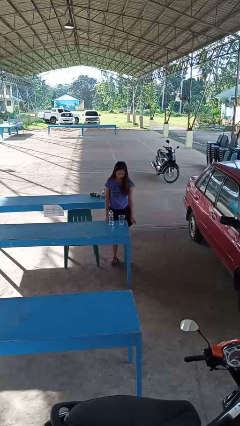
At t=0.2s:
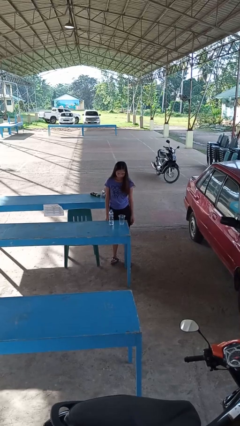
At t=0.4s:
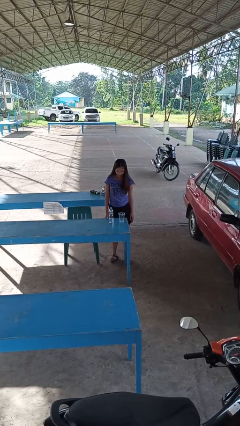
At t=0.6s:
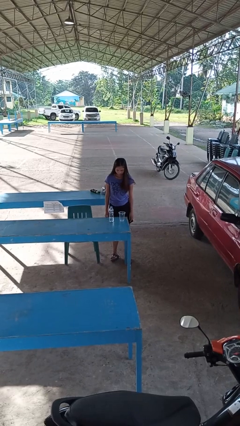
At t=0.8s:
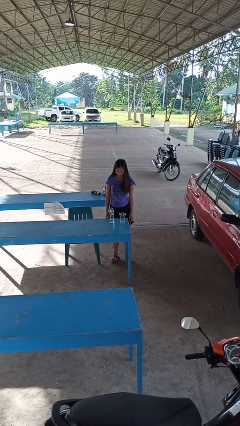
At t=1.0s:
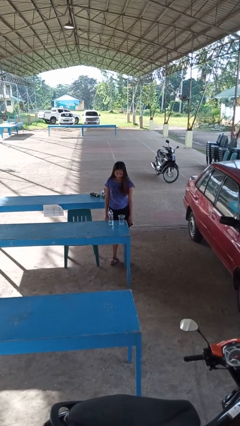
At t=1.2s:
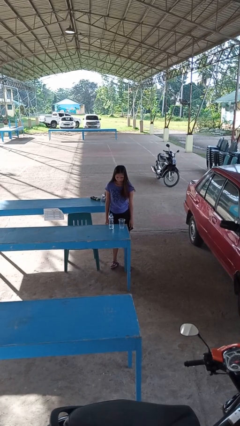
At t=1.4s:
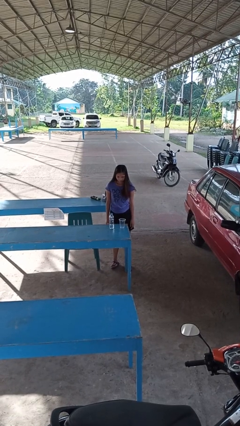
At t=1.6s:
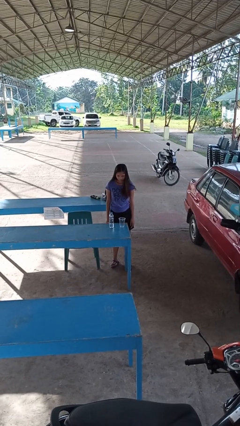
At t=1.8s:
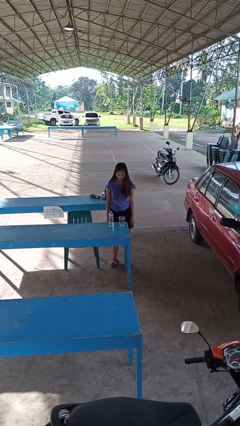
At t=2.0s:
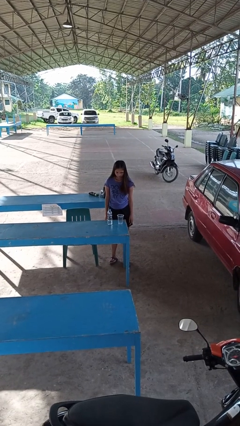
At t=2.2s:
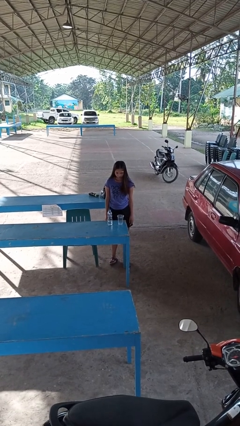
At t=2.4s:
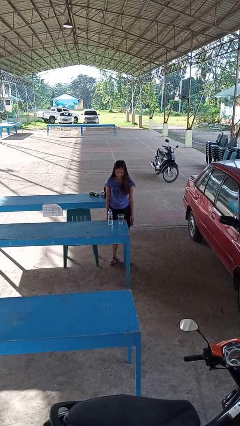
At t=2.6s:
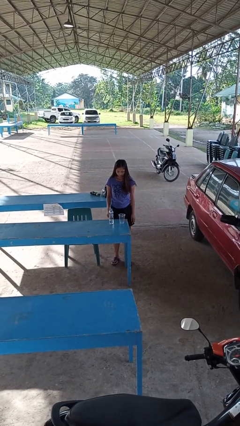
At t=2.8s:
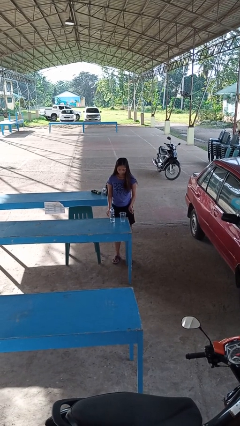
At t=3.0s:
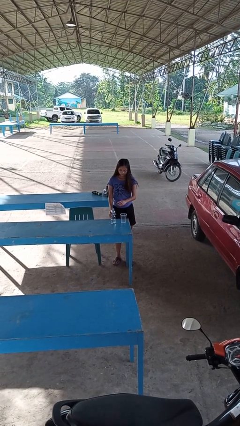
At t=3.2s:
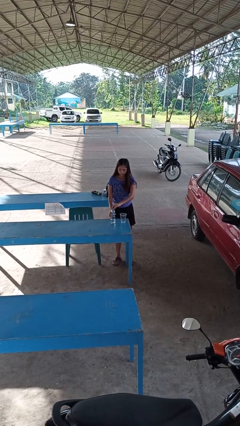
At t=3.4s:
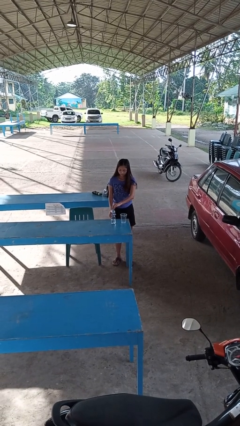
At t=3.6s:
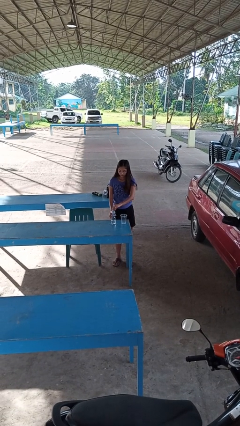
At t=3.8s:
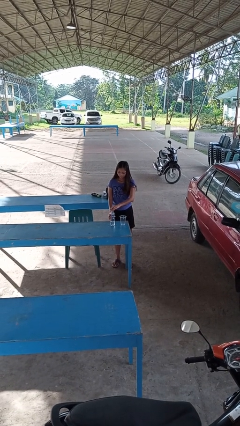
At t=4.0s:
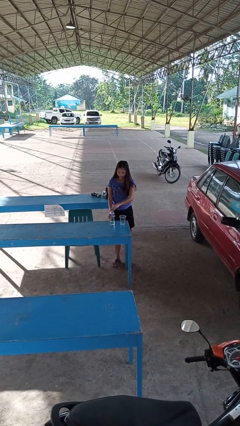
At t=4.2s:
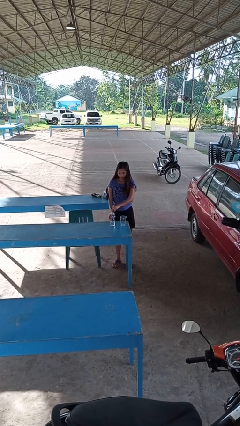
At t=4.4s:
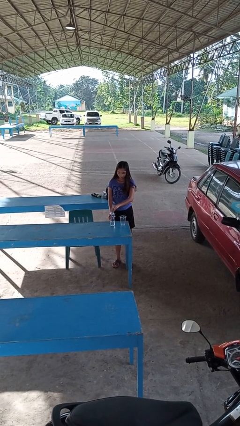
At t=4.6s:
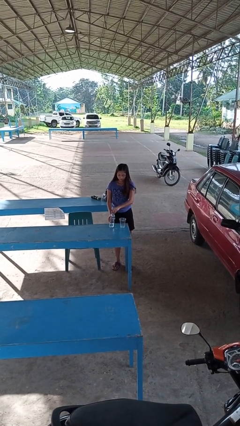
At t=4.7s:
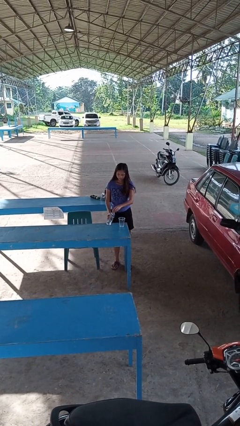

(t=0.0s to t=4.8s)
person unscrews lid from bottle

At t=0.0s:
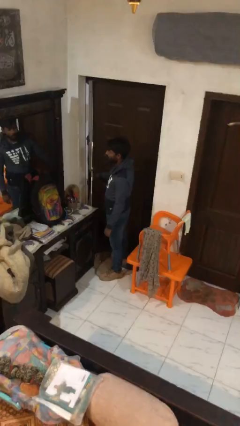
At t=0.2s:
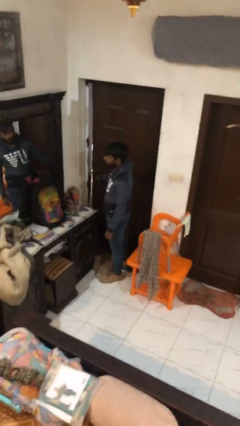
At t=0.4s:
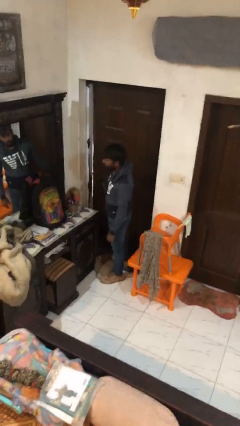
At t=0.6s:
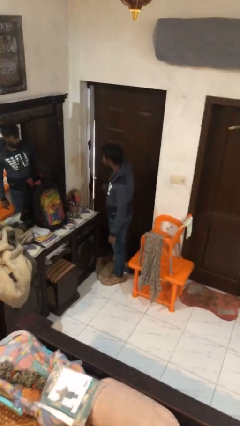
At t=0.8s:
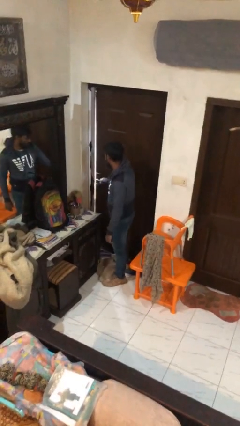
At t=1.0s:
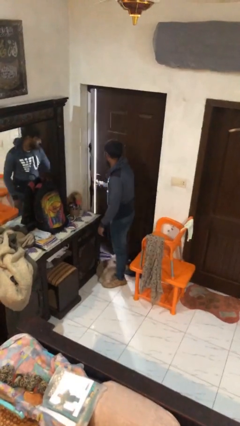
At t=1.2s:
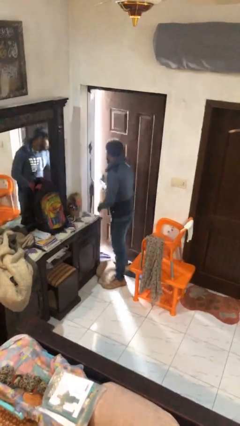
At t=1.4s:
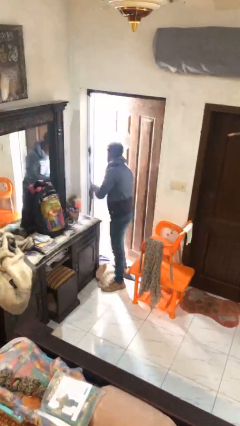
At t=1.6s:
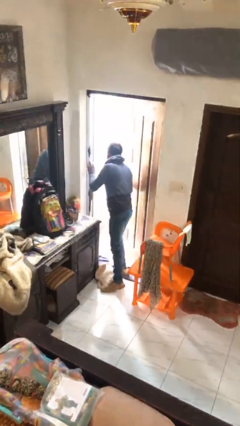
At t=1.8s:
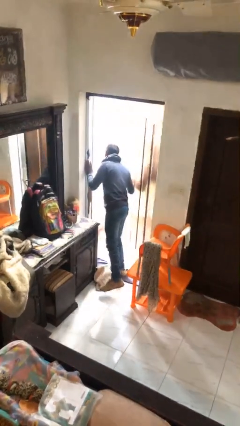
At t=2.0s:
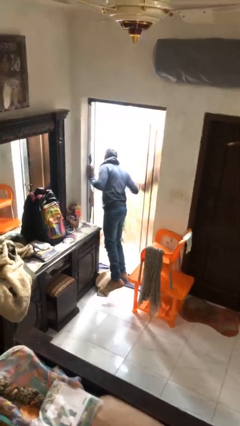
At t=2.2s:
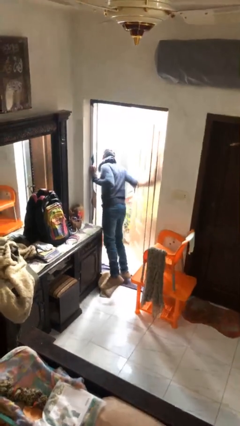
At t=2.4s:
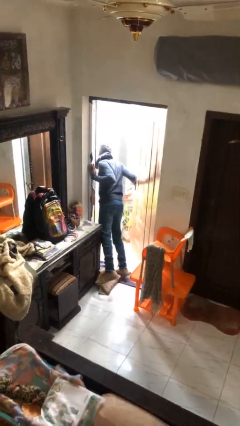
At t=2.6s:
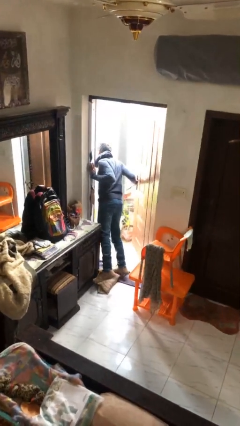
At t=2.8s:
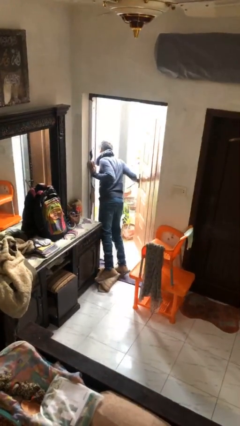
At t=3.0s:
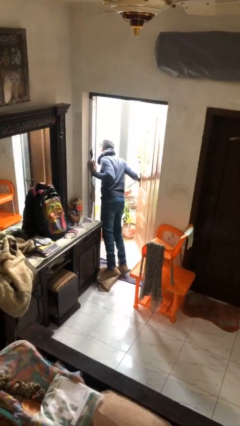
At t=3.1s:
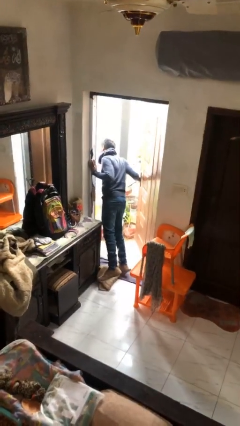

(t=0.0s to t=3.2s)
person opens facility door

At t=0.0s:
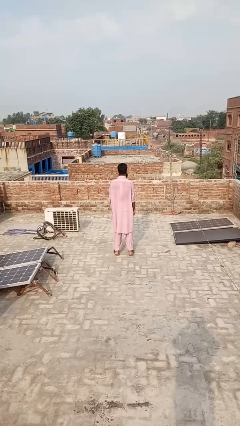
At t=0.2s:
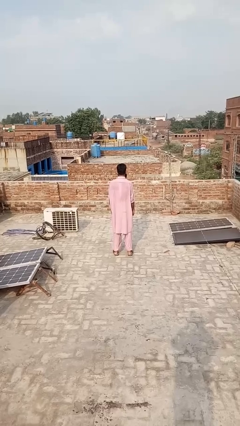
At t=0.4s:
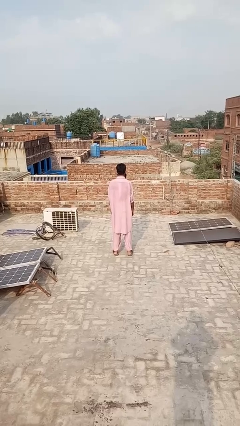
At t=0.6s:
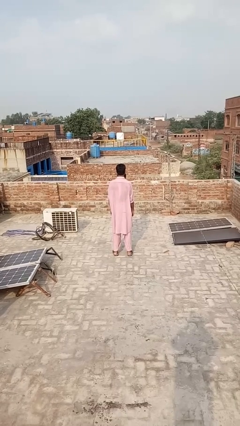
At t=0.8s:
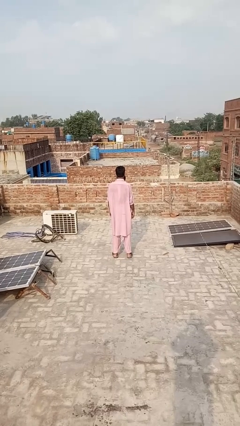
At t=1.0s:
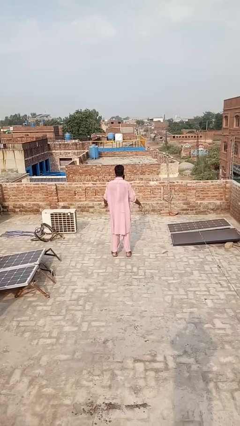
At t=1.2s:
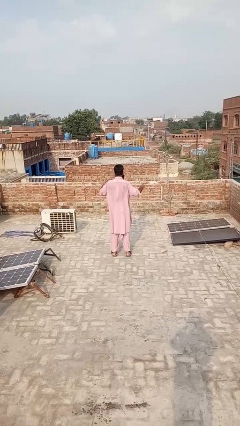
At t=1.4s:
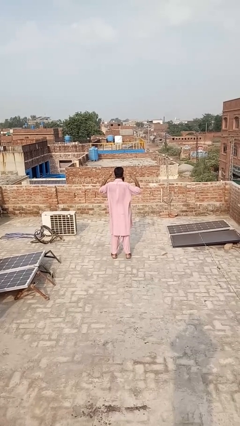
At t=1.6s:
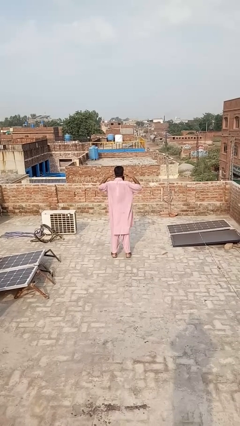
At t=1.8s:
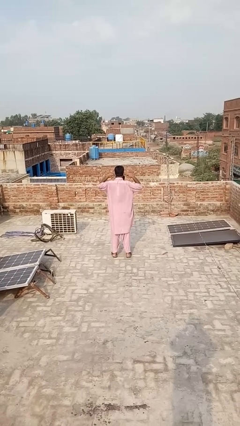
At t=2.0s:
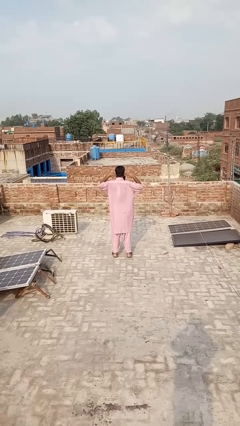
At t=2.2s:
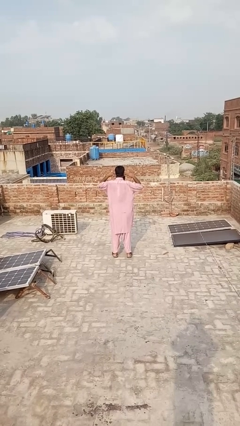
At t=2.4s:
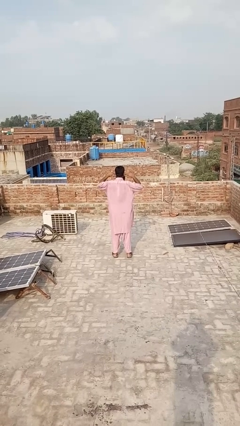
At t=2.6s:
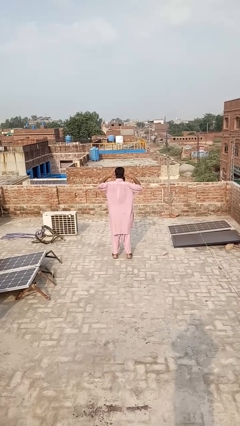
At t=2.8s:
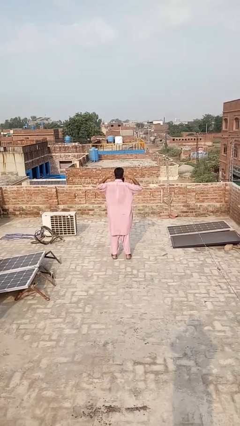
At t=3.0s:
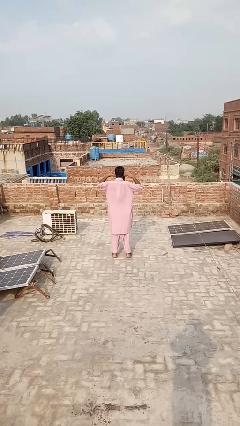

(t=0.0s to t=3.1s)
person puts fingers in ear

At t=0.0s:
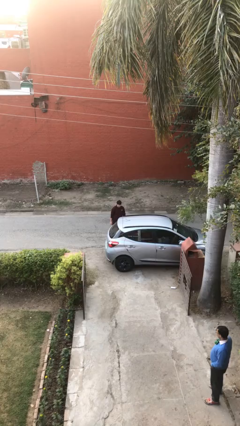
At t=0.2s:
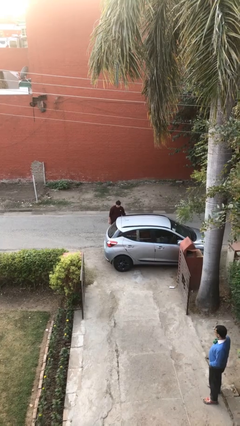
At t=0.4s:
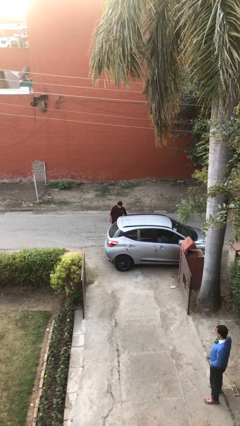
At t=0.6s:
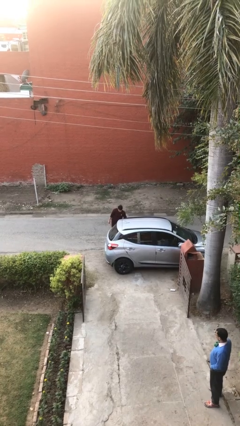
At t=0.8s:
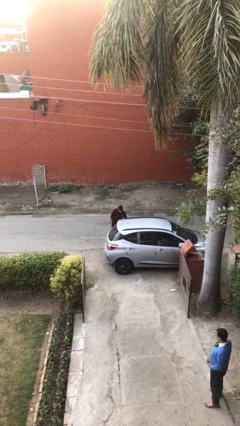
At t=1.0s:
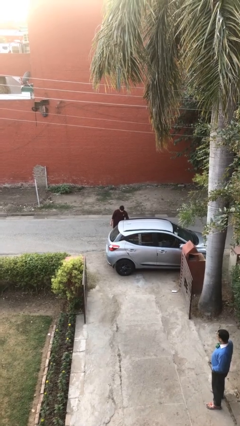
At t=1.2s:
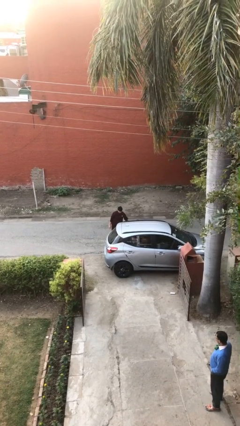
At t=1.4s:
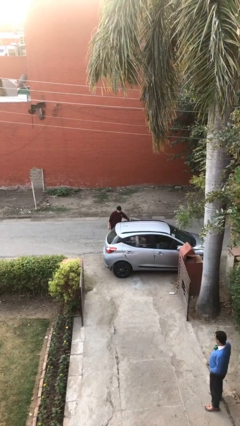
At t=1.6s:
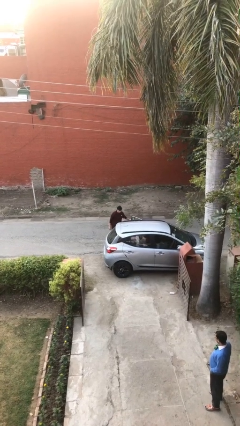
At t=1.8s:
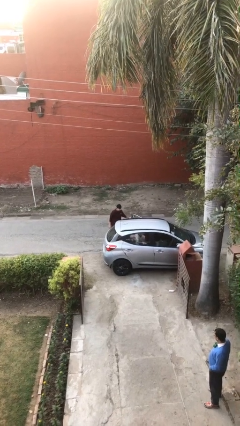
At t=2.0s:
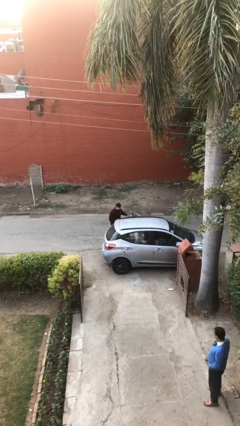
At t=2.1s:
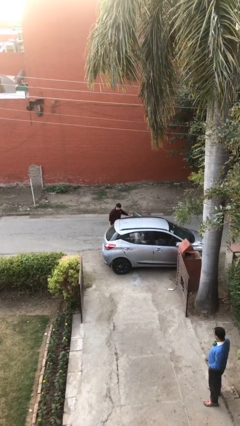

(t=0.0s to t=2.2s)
person opens car door

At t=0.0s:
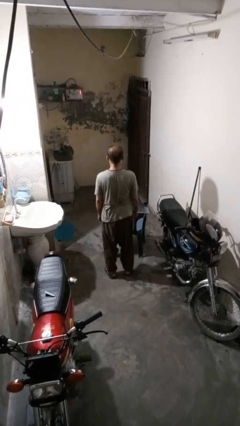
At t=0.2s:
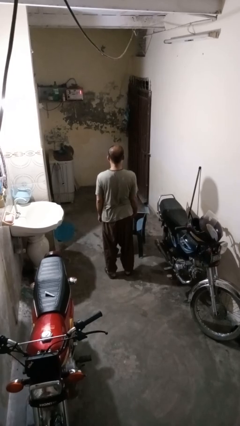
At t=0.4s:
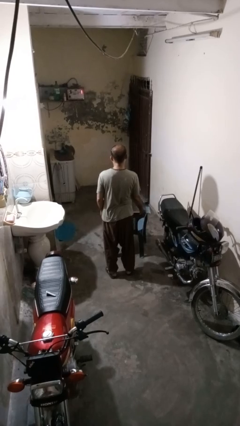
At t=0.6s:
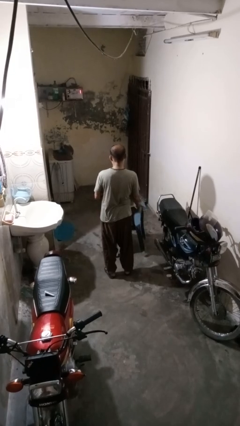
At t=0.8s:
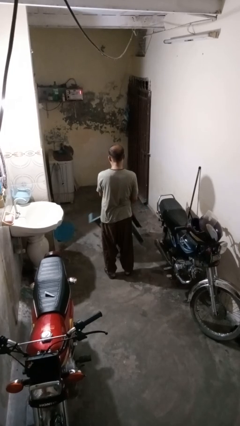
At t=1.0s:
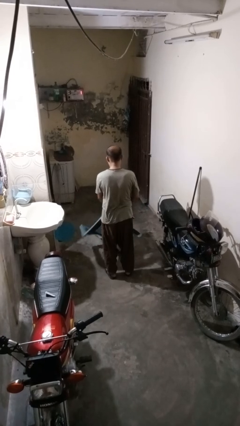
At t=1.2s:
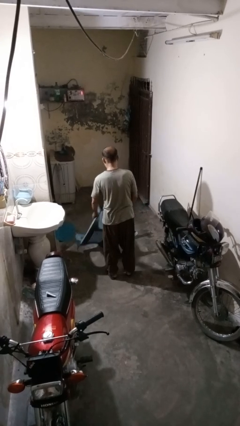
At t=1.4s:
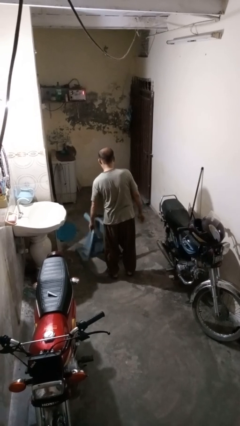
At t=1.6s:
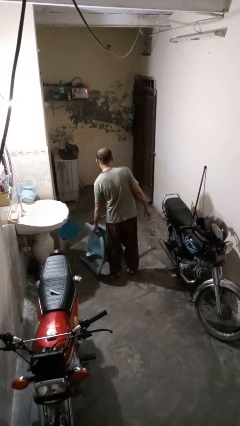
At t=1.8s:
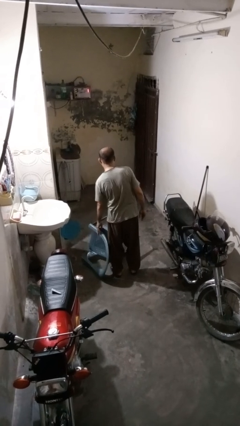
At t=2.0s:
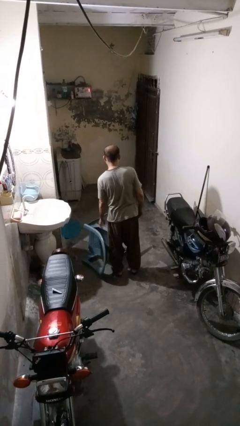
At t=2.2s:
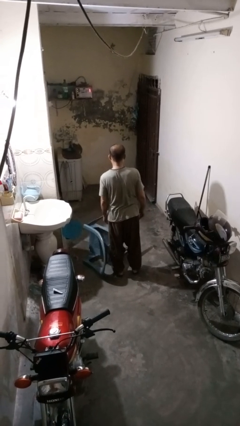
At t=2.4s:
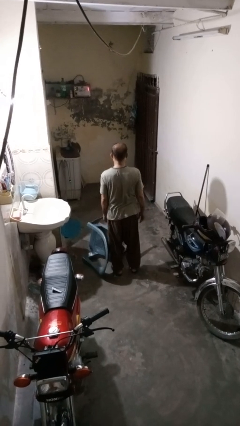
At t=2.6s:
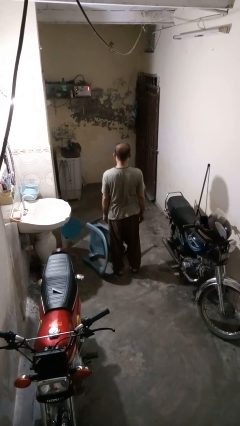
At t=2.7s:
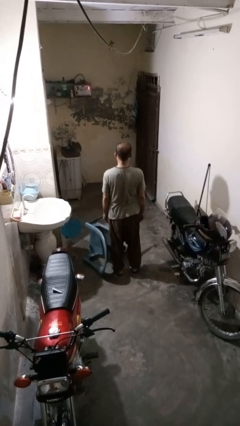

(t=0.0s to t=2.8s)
person knocks over furniture

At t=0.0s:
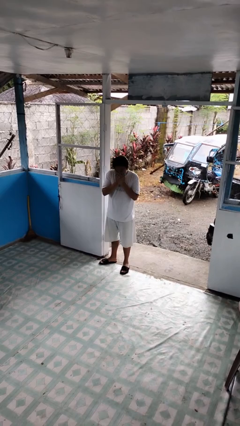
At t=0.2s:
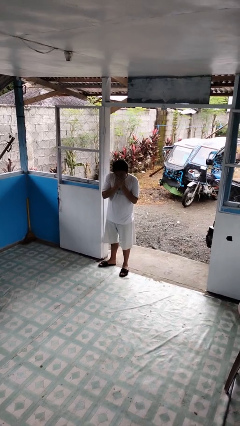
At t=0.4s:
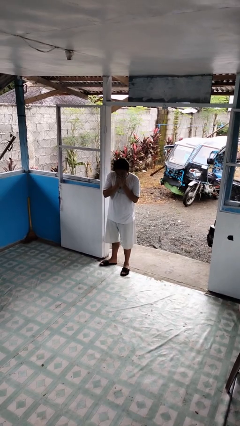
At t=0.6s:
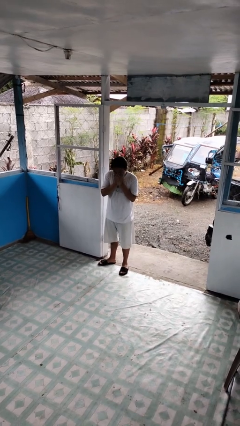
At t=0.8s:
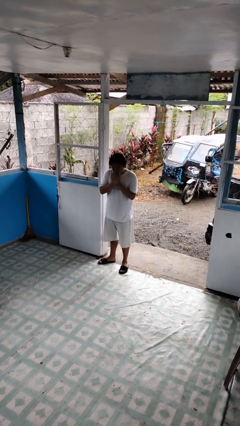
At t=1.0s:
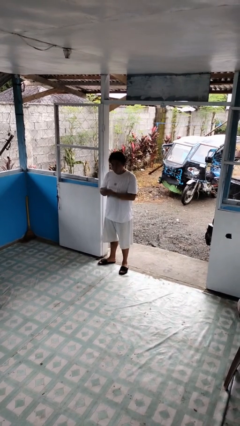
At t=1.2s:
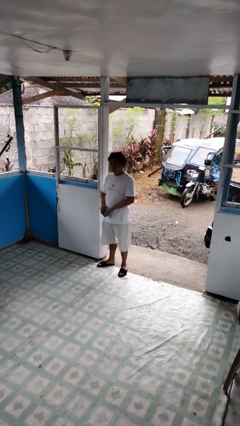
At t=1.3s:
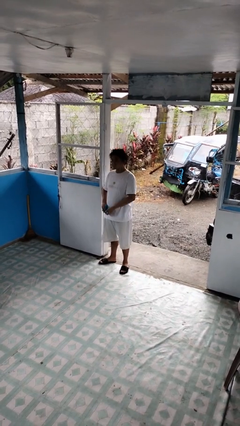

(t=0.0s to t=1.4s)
person blows nose
